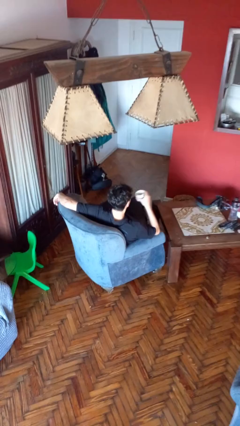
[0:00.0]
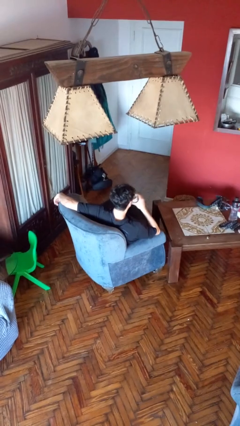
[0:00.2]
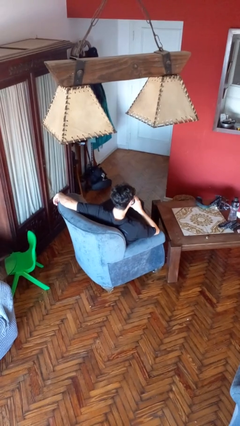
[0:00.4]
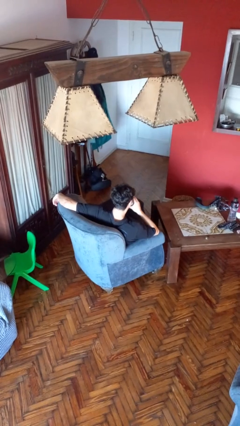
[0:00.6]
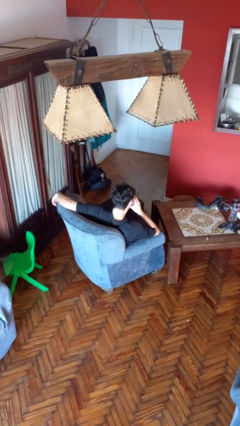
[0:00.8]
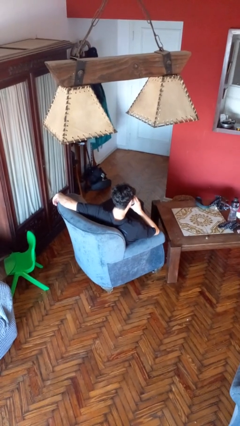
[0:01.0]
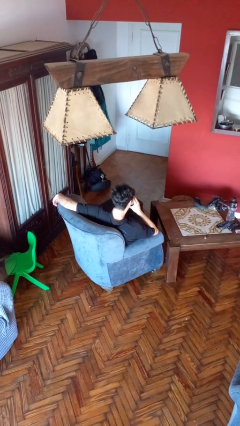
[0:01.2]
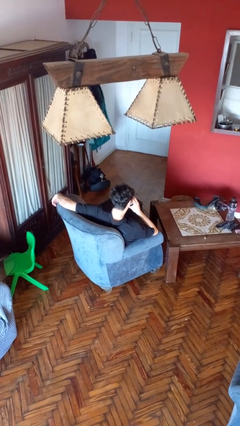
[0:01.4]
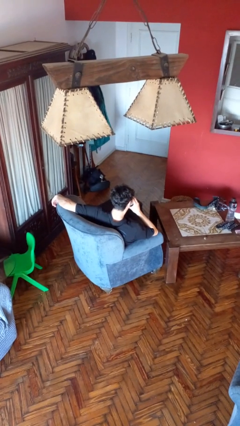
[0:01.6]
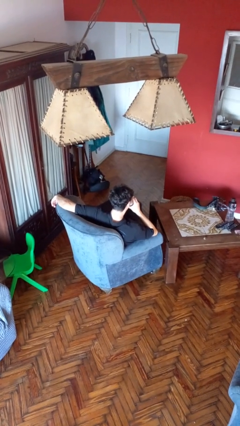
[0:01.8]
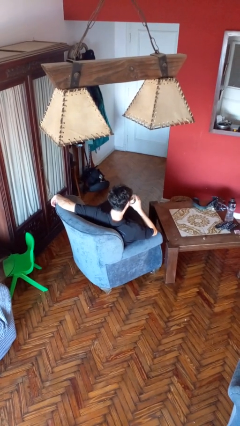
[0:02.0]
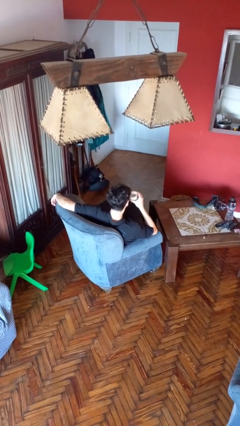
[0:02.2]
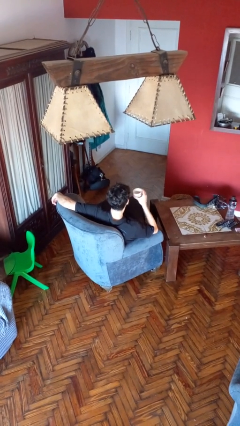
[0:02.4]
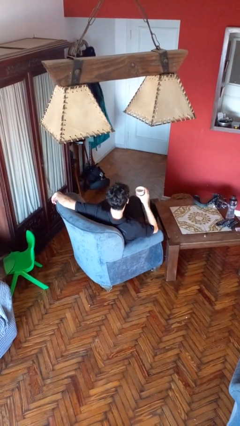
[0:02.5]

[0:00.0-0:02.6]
person drinks from mug

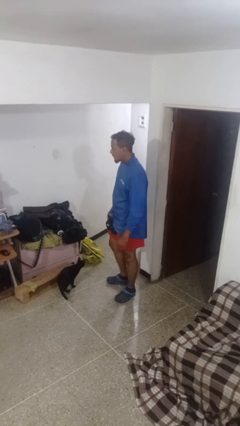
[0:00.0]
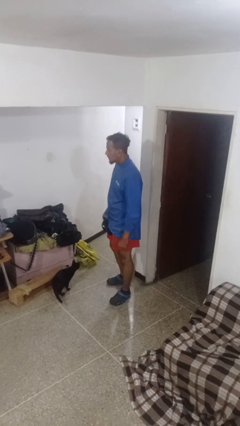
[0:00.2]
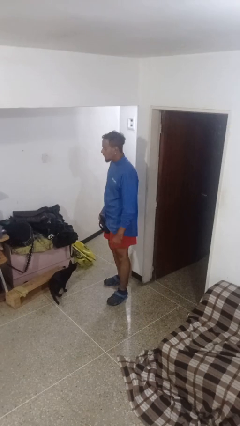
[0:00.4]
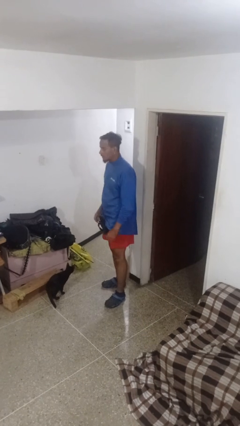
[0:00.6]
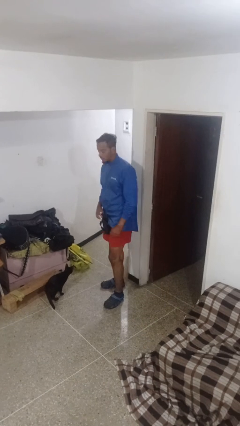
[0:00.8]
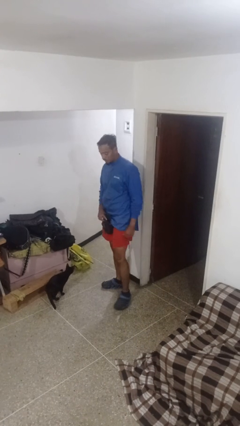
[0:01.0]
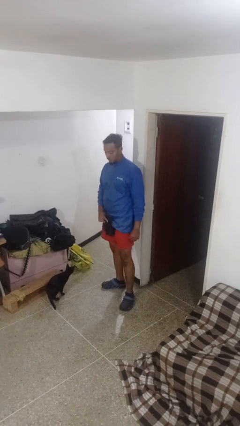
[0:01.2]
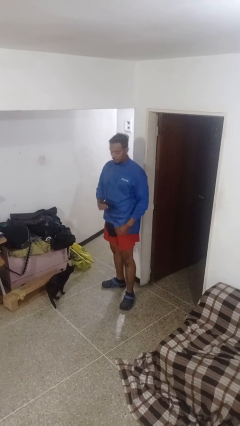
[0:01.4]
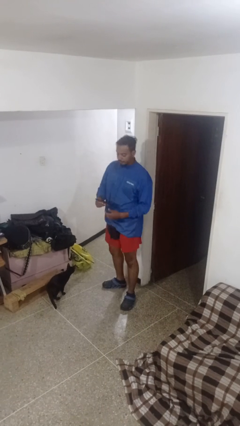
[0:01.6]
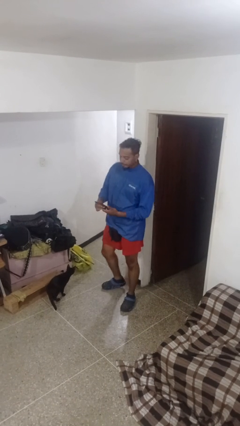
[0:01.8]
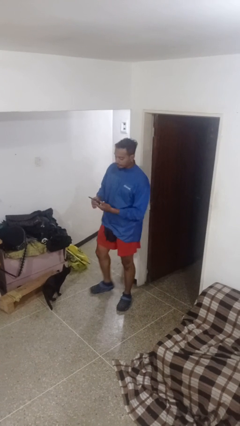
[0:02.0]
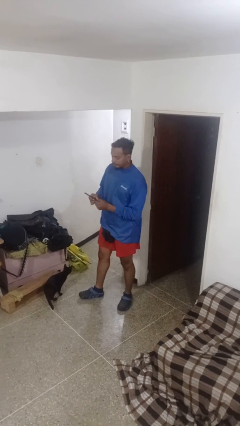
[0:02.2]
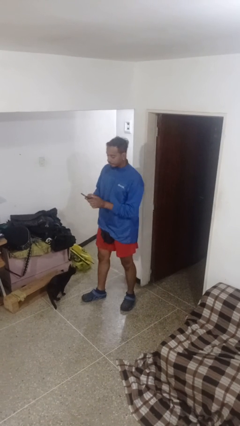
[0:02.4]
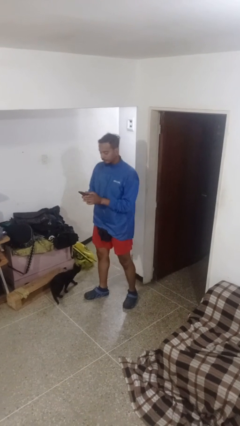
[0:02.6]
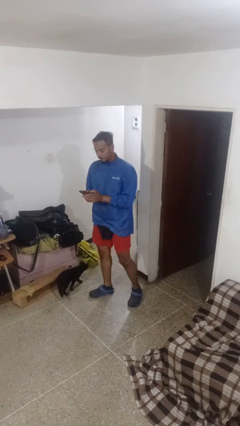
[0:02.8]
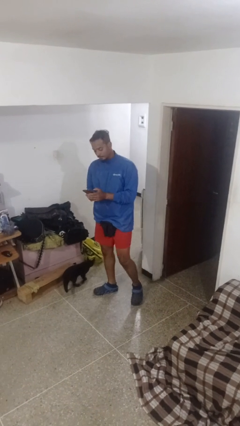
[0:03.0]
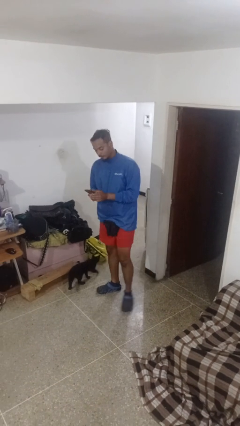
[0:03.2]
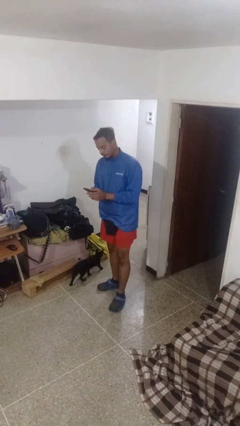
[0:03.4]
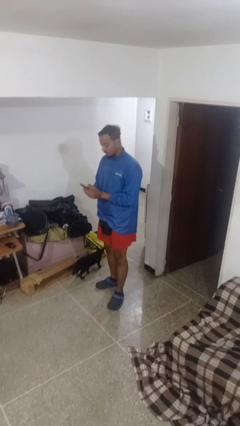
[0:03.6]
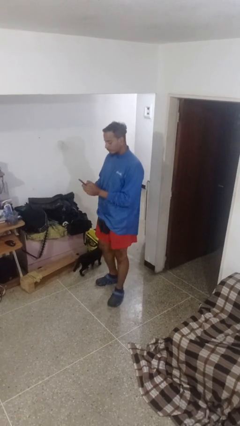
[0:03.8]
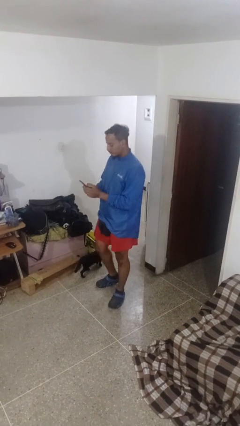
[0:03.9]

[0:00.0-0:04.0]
person takes phone from pocket

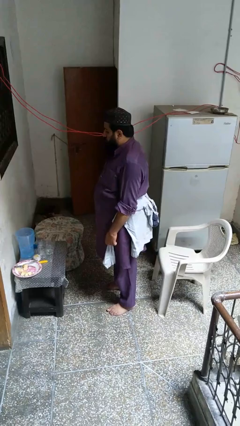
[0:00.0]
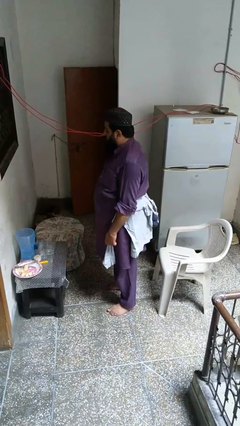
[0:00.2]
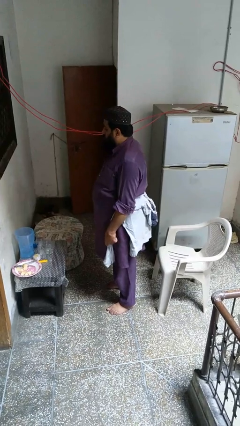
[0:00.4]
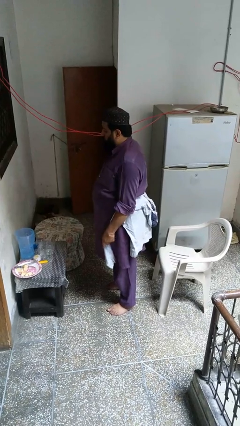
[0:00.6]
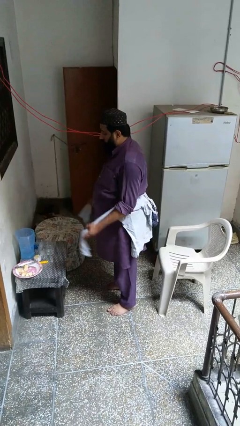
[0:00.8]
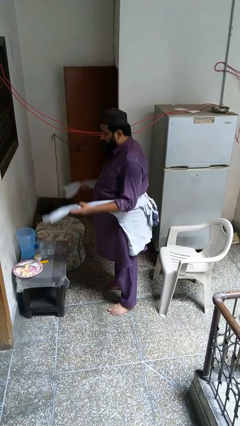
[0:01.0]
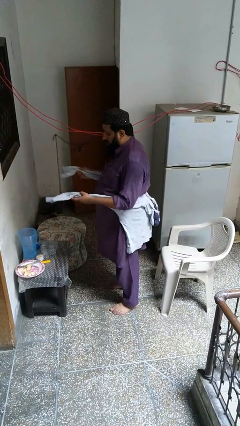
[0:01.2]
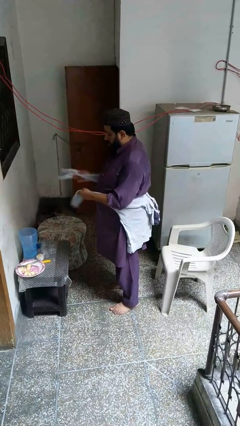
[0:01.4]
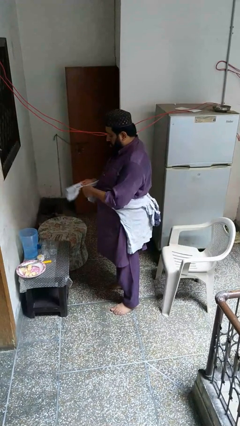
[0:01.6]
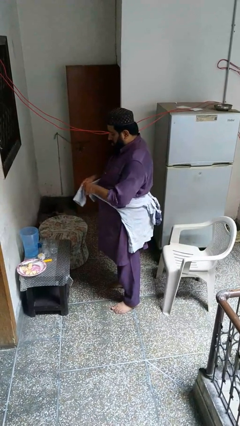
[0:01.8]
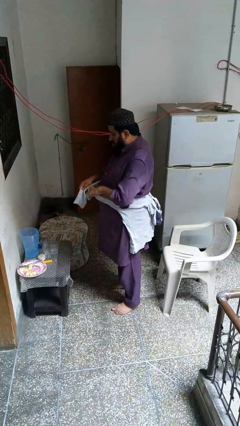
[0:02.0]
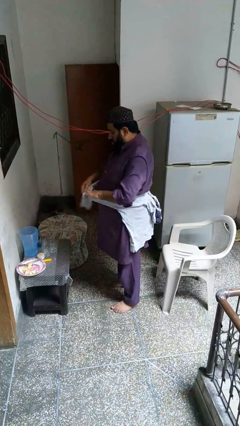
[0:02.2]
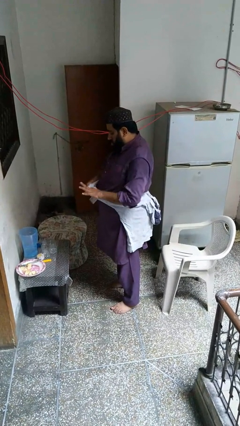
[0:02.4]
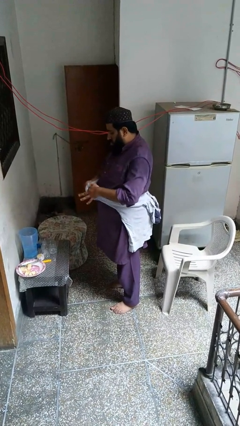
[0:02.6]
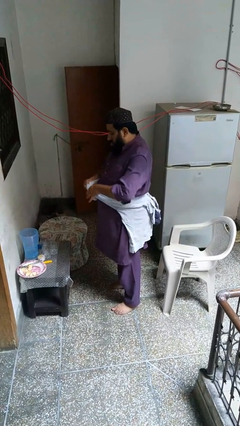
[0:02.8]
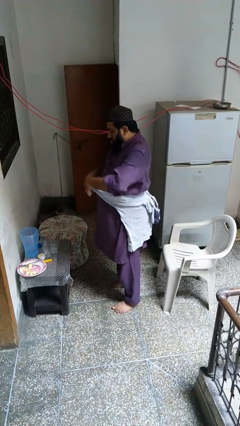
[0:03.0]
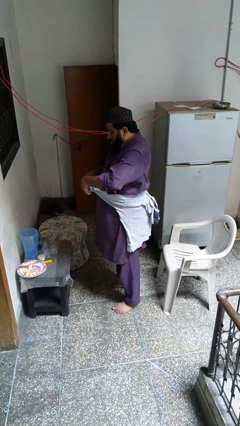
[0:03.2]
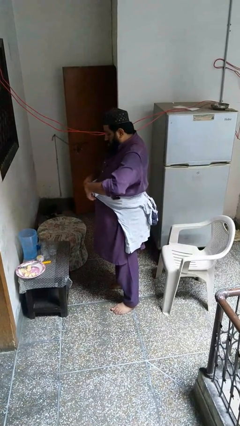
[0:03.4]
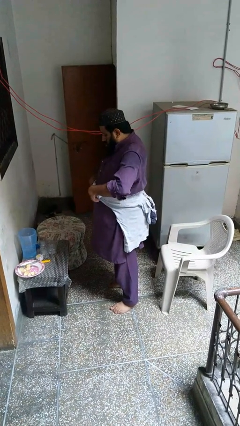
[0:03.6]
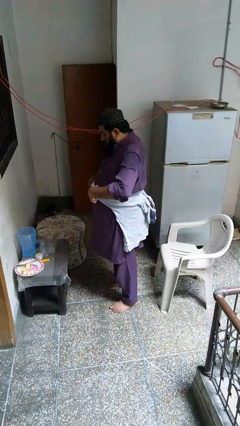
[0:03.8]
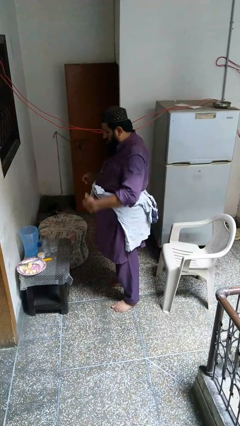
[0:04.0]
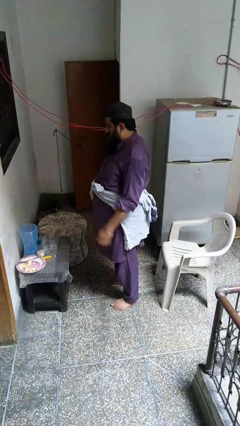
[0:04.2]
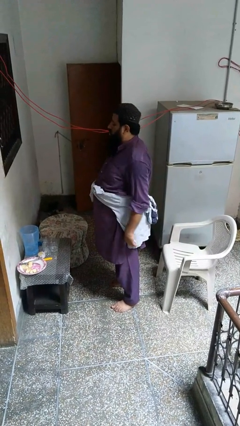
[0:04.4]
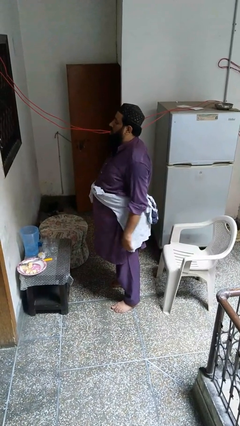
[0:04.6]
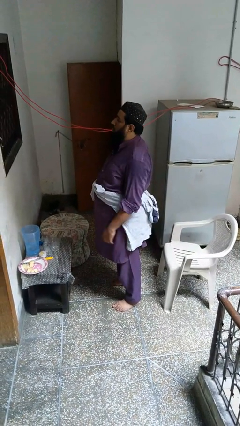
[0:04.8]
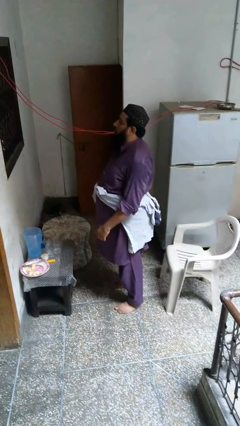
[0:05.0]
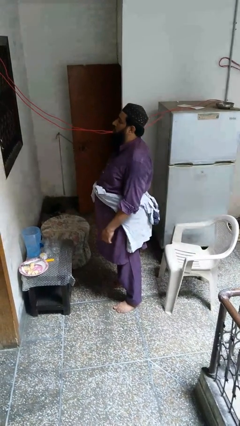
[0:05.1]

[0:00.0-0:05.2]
person ties jacket around waist

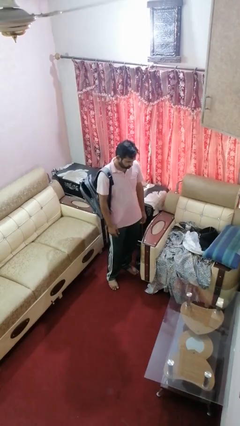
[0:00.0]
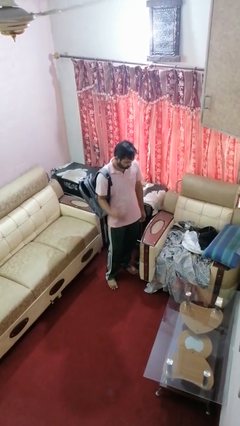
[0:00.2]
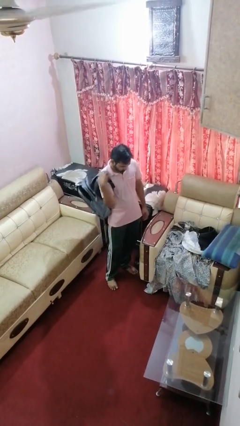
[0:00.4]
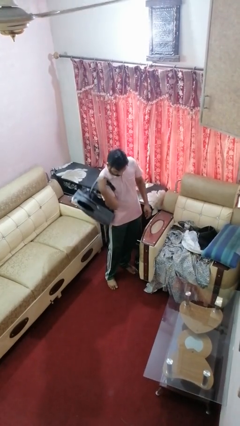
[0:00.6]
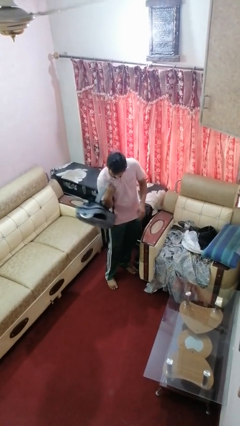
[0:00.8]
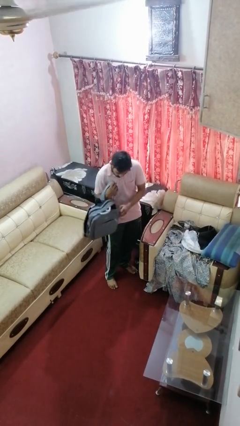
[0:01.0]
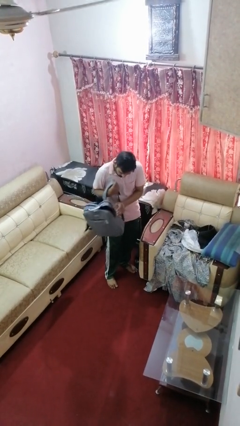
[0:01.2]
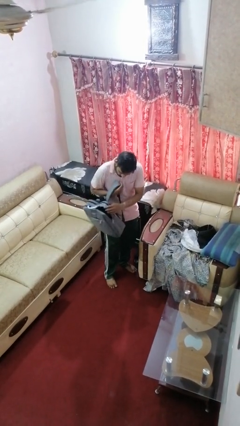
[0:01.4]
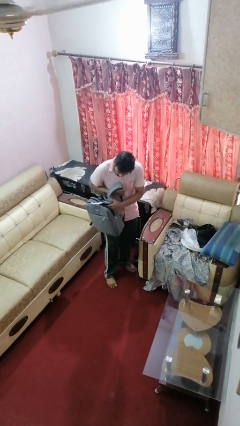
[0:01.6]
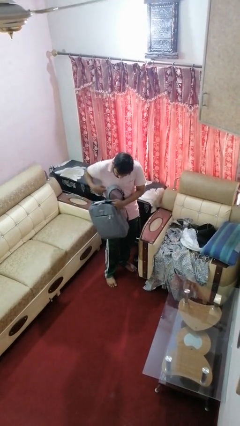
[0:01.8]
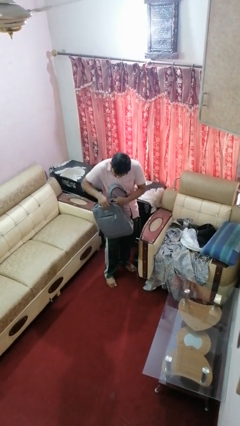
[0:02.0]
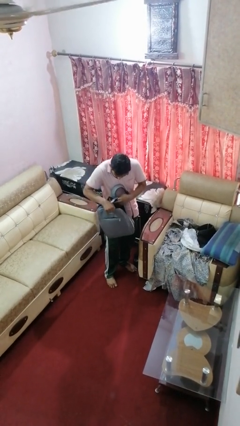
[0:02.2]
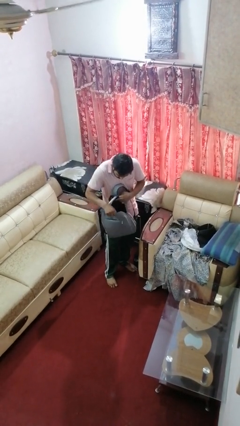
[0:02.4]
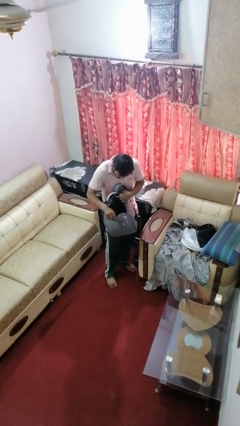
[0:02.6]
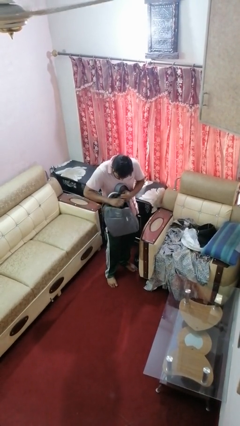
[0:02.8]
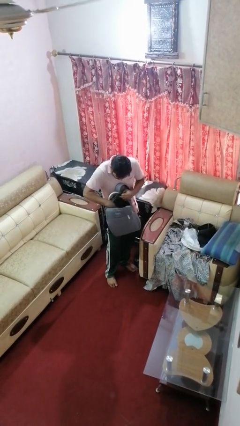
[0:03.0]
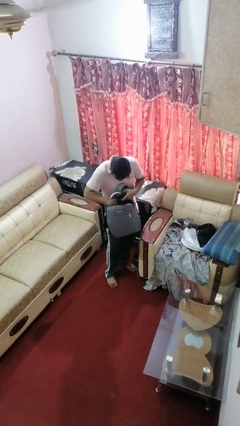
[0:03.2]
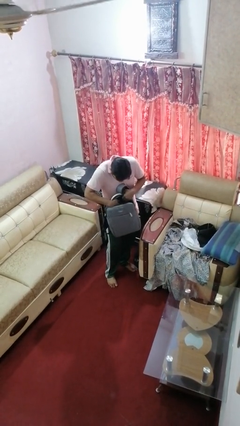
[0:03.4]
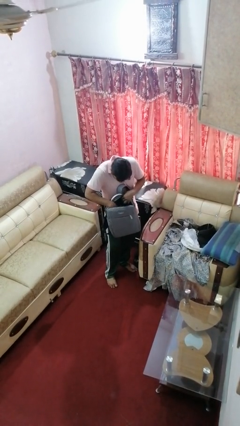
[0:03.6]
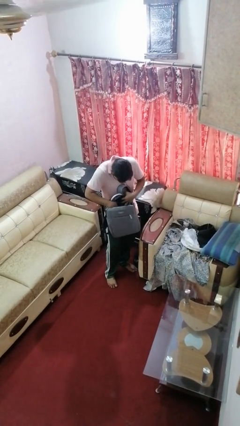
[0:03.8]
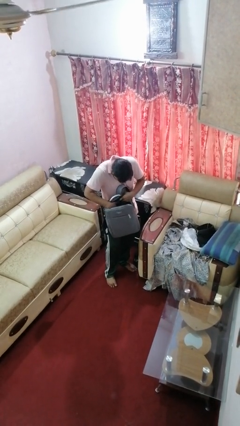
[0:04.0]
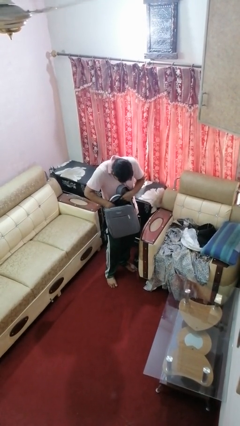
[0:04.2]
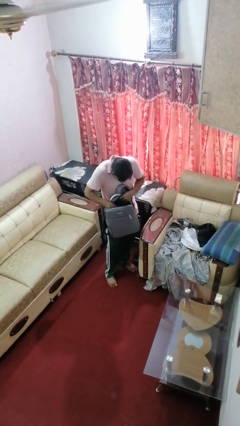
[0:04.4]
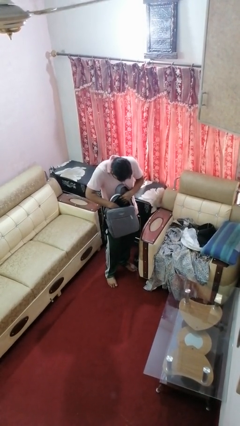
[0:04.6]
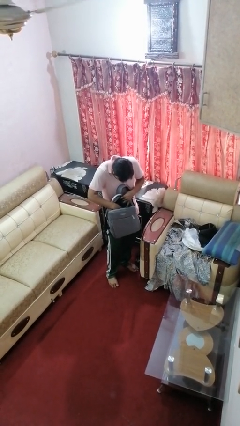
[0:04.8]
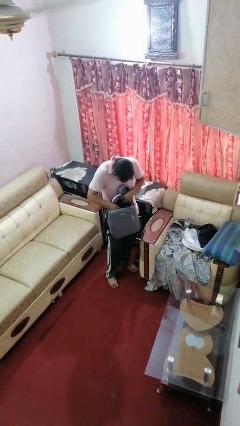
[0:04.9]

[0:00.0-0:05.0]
person searches in backpack

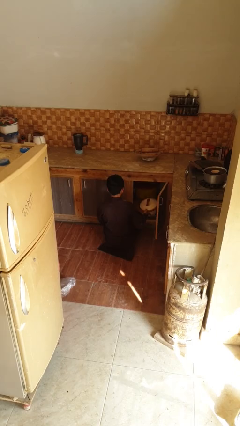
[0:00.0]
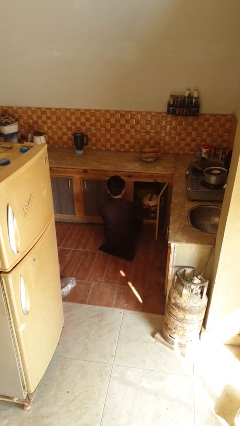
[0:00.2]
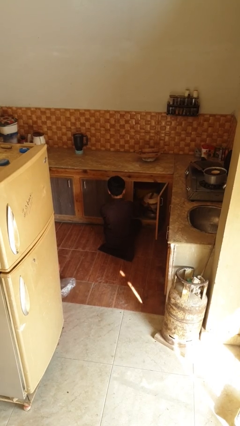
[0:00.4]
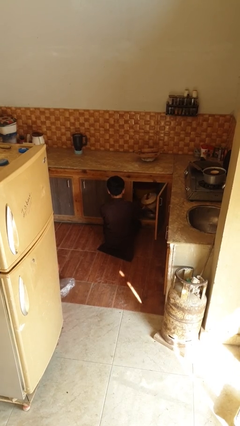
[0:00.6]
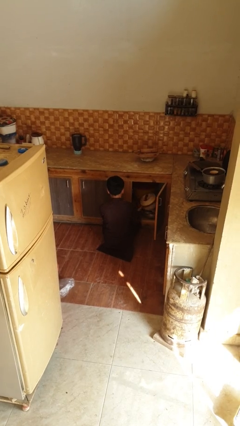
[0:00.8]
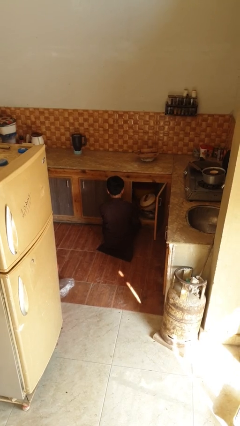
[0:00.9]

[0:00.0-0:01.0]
person puts object into kitchen drawer
